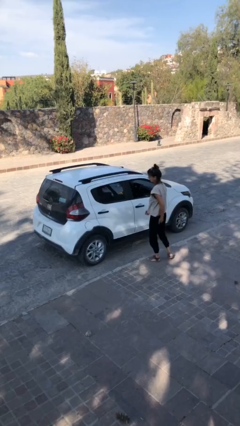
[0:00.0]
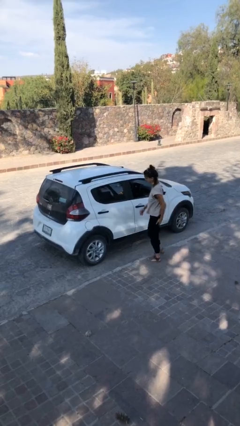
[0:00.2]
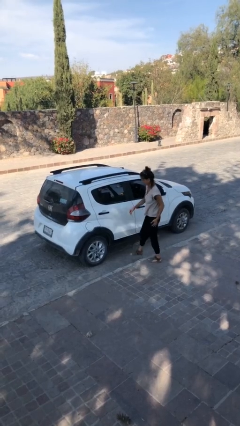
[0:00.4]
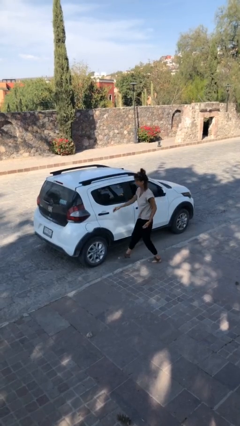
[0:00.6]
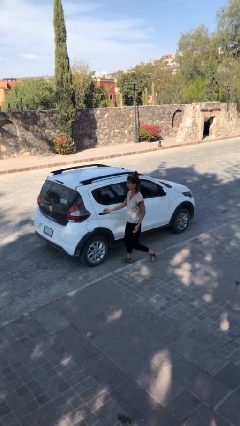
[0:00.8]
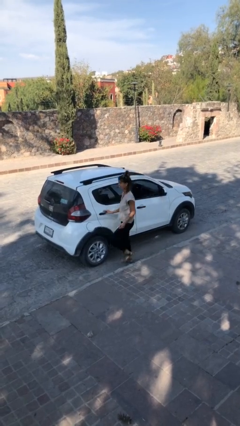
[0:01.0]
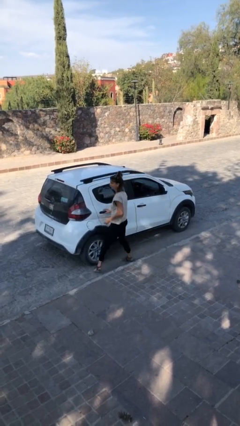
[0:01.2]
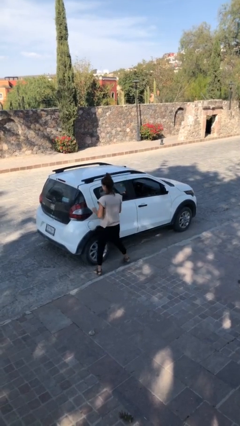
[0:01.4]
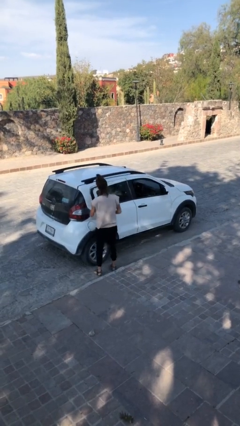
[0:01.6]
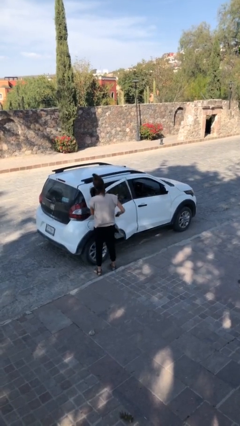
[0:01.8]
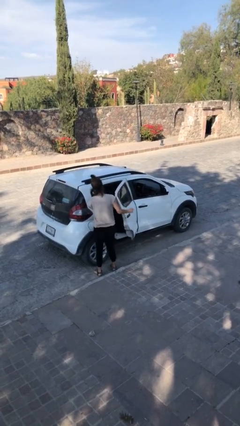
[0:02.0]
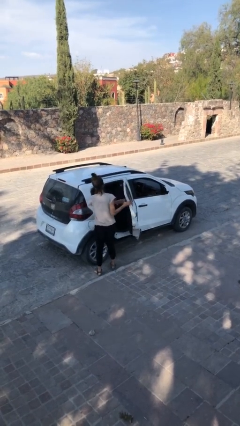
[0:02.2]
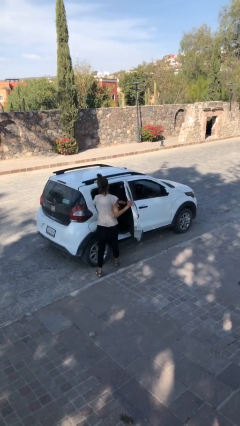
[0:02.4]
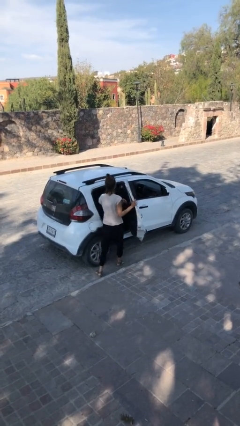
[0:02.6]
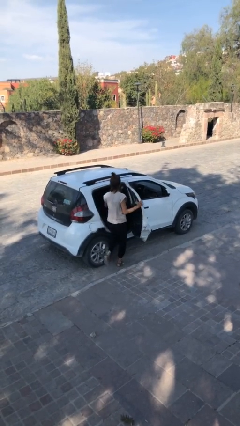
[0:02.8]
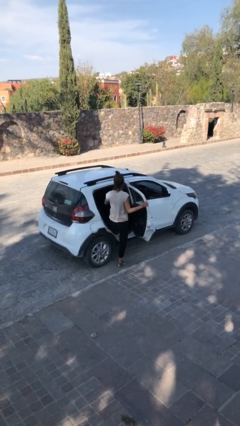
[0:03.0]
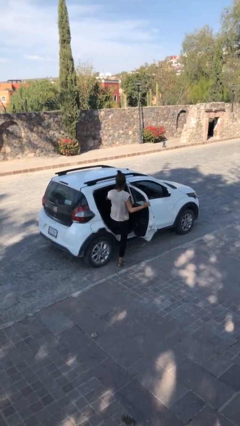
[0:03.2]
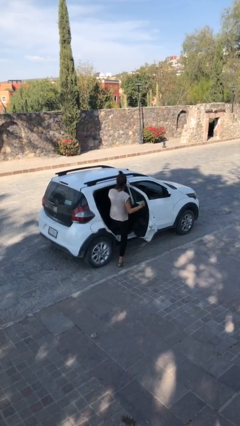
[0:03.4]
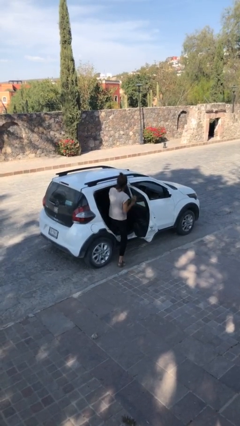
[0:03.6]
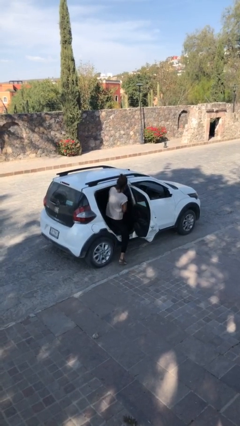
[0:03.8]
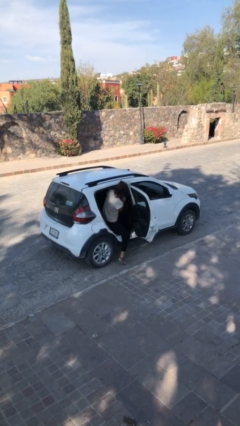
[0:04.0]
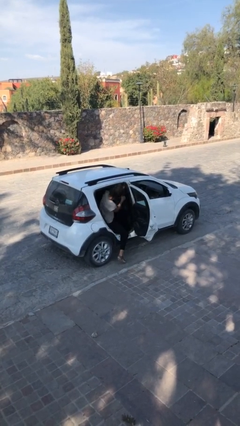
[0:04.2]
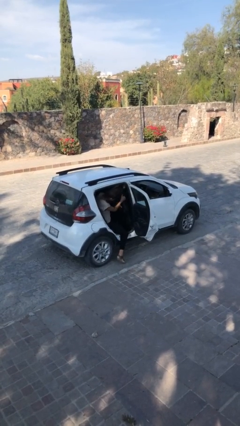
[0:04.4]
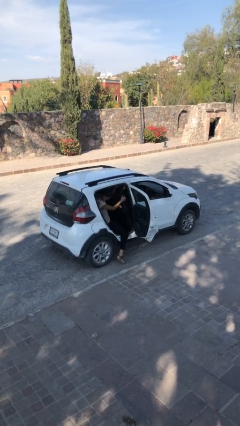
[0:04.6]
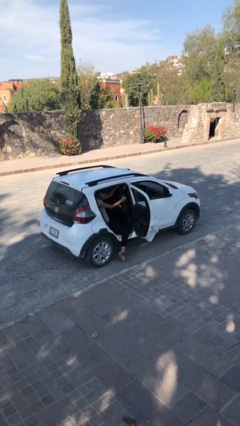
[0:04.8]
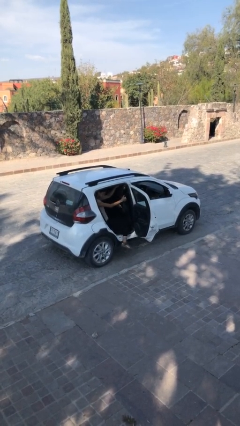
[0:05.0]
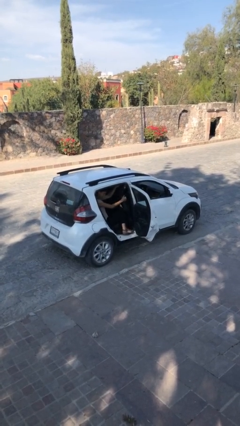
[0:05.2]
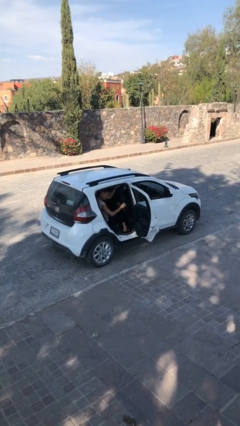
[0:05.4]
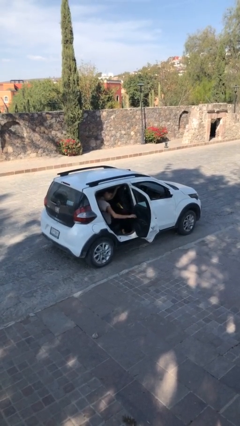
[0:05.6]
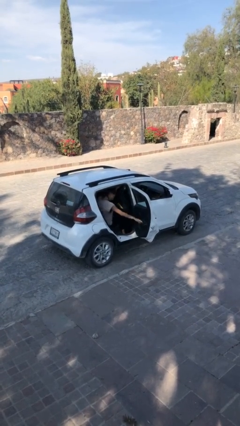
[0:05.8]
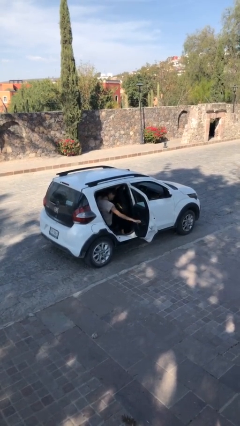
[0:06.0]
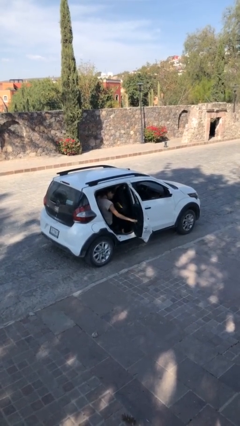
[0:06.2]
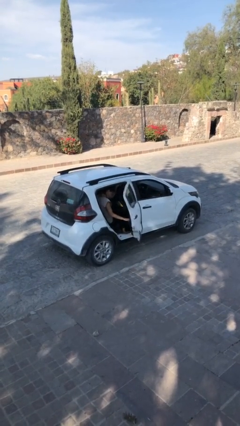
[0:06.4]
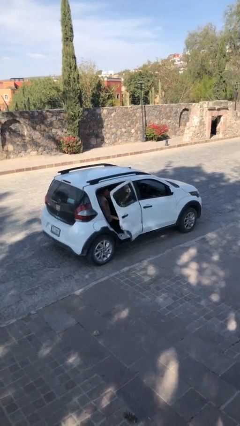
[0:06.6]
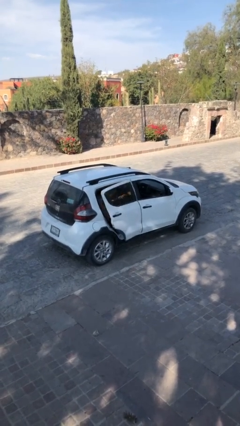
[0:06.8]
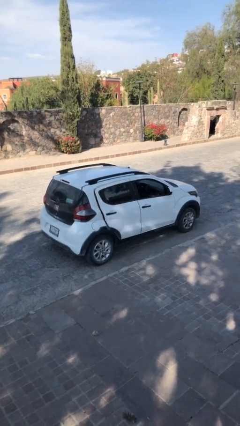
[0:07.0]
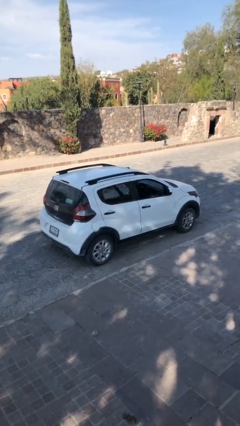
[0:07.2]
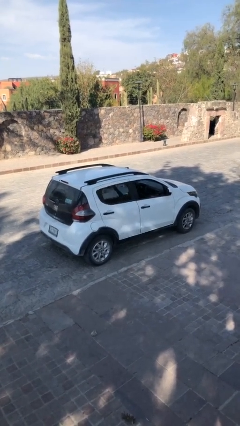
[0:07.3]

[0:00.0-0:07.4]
car picks up person

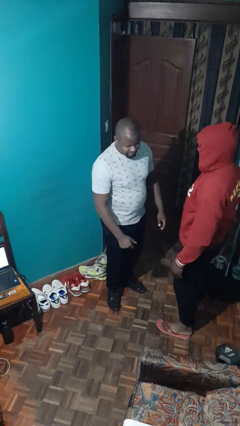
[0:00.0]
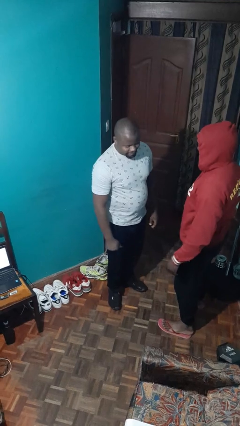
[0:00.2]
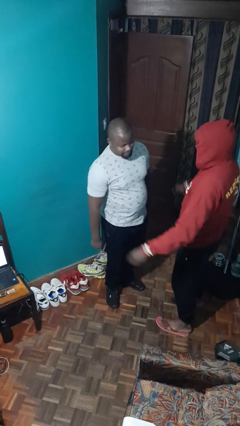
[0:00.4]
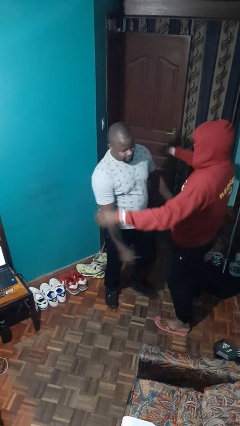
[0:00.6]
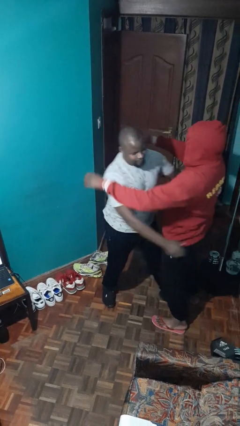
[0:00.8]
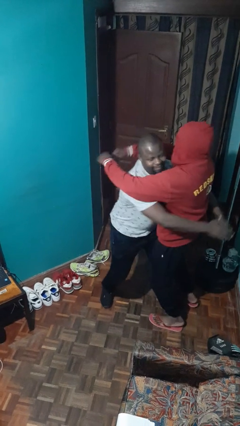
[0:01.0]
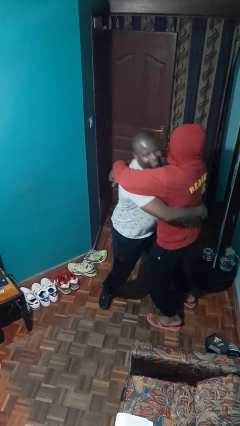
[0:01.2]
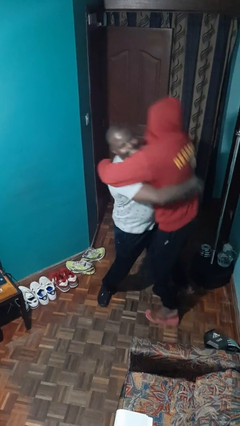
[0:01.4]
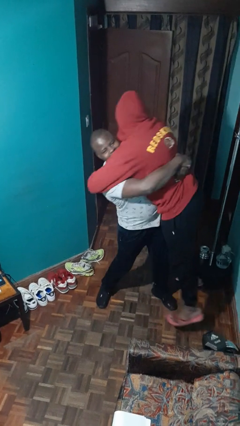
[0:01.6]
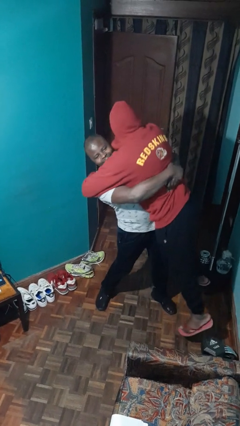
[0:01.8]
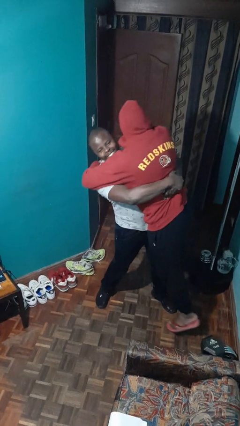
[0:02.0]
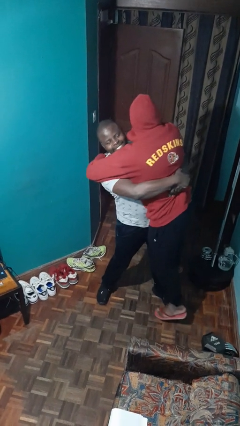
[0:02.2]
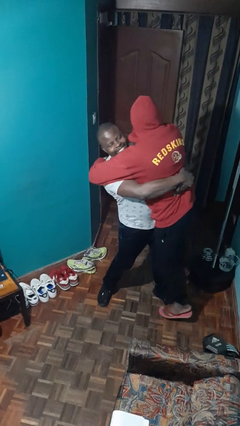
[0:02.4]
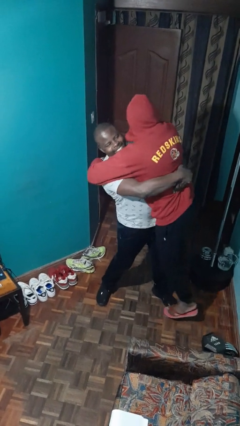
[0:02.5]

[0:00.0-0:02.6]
person picks up person

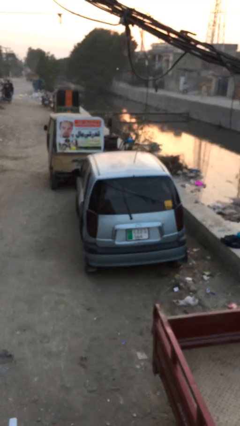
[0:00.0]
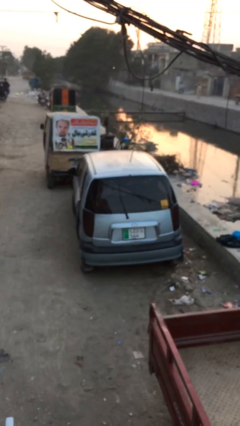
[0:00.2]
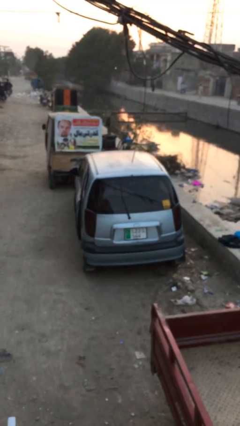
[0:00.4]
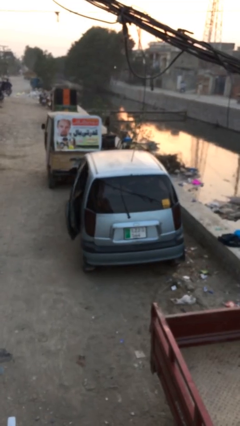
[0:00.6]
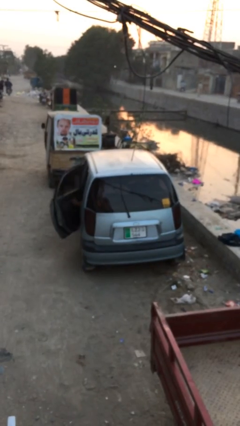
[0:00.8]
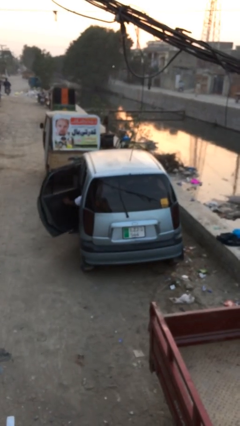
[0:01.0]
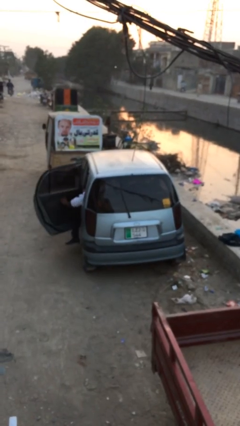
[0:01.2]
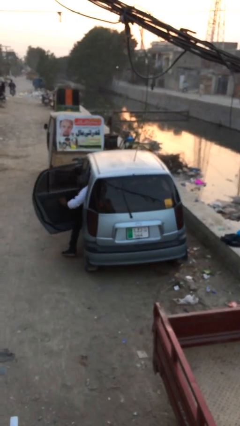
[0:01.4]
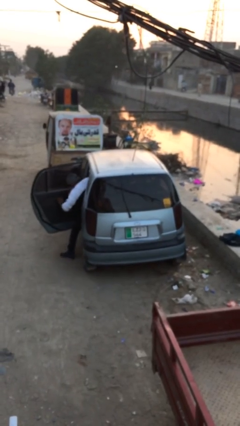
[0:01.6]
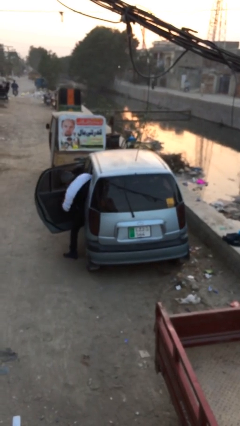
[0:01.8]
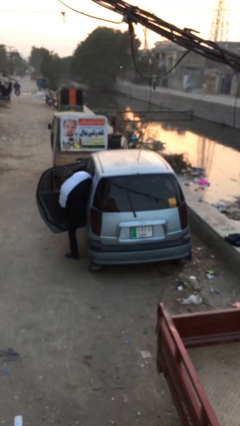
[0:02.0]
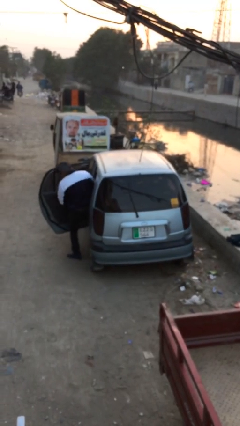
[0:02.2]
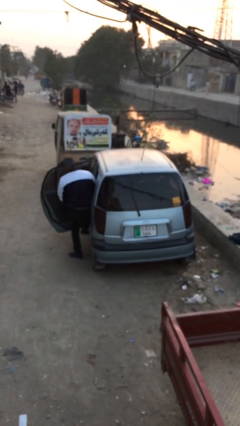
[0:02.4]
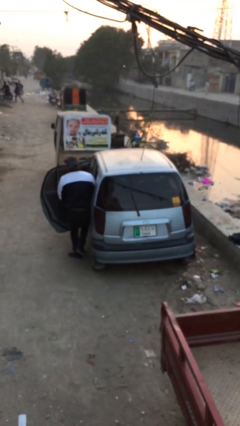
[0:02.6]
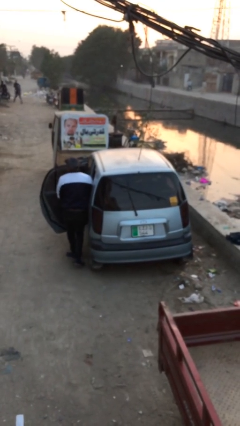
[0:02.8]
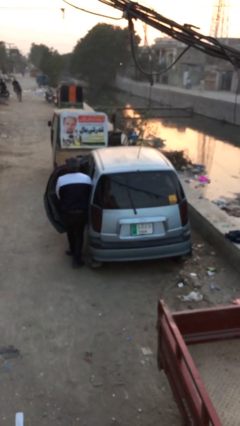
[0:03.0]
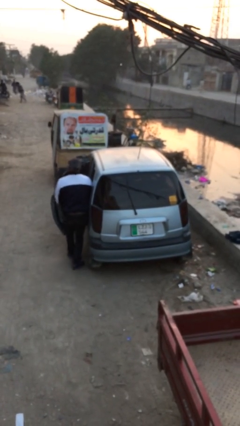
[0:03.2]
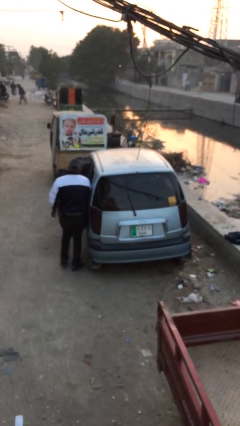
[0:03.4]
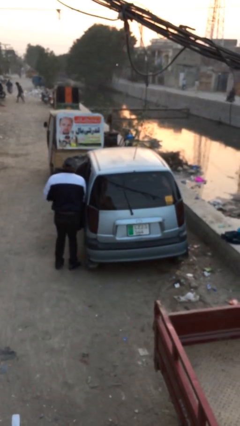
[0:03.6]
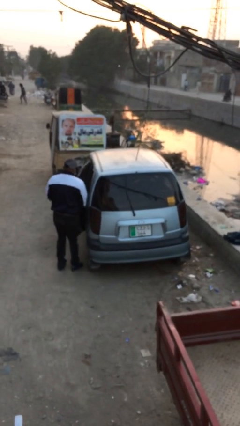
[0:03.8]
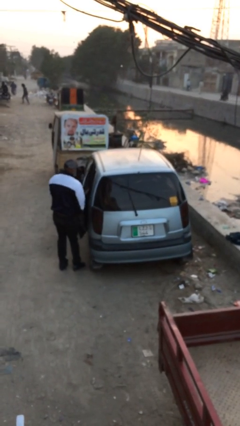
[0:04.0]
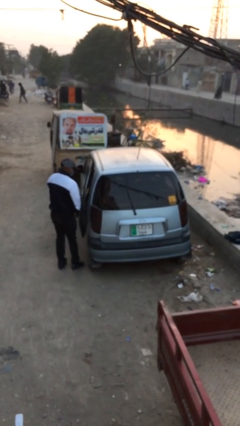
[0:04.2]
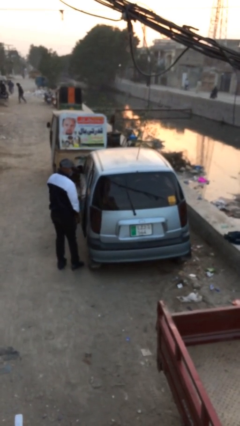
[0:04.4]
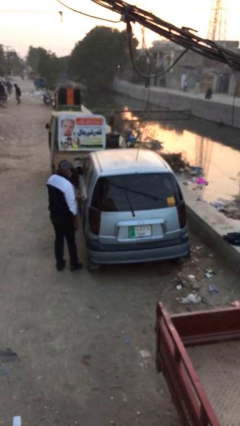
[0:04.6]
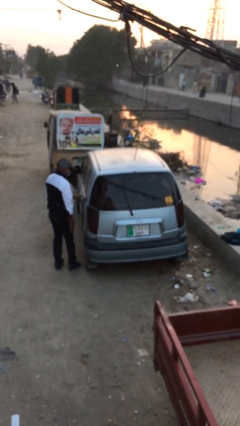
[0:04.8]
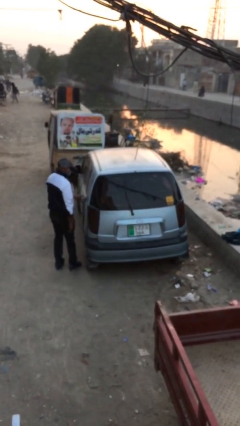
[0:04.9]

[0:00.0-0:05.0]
car drops off person

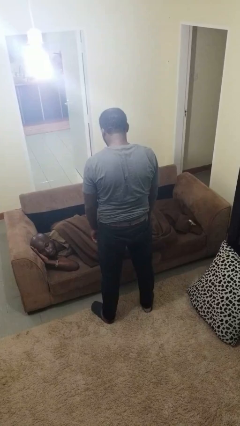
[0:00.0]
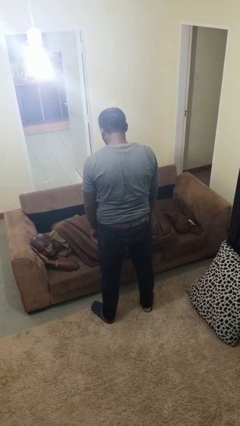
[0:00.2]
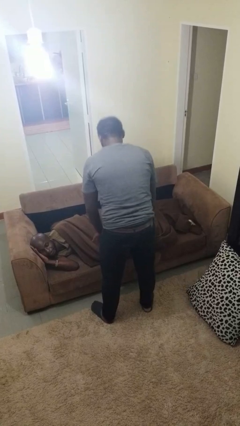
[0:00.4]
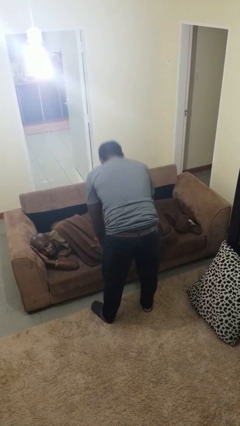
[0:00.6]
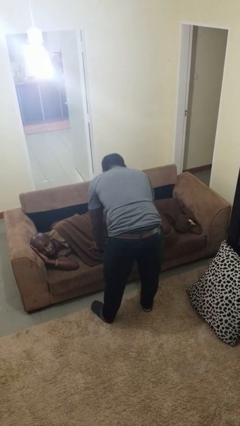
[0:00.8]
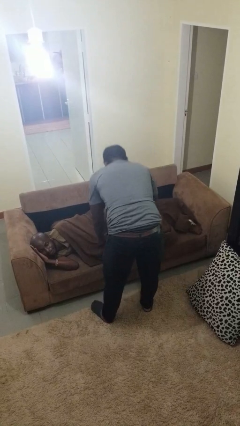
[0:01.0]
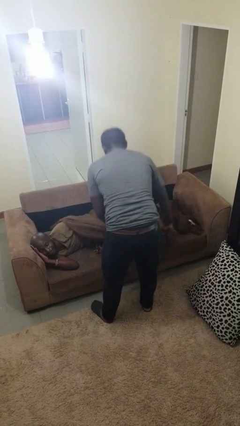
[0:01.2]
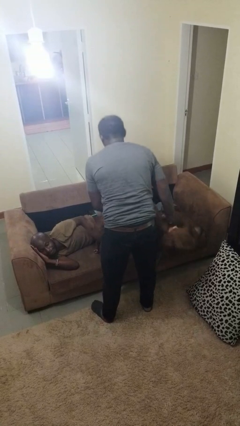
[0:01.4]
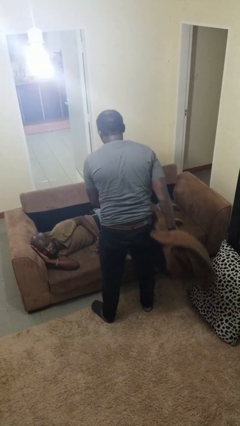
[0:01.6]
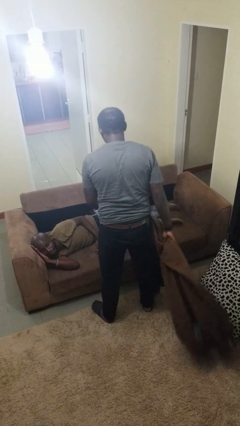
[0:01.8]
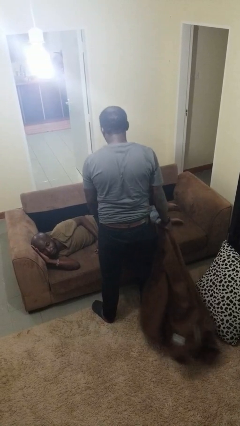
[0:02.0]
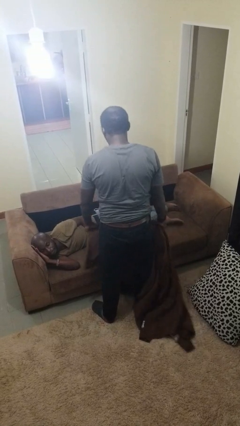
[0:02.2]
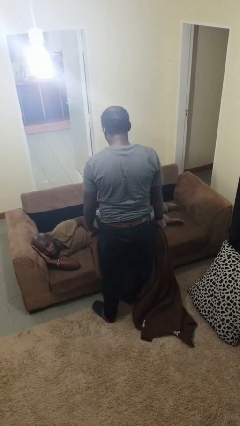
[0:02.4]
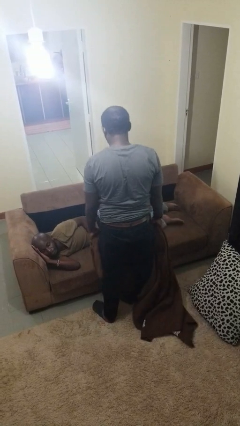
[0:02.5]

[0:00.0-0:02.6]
person uncovers friend with blanket
